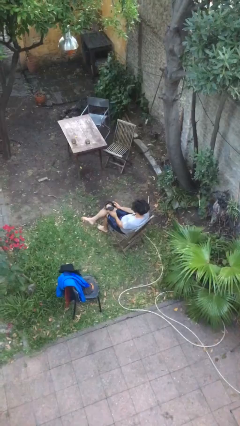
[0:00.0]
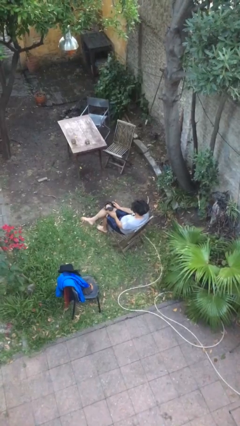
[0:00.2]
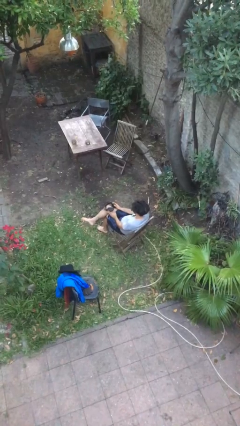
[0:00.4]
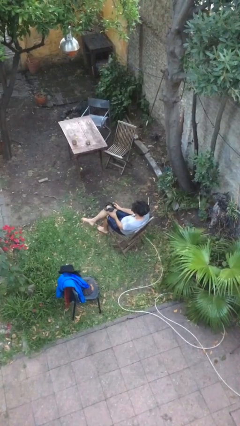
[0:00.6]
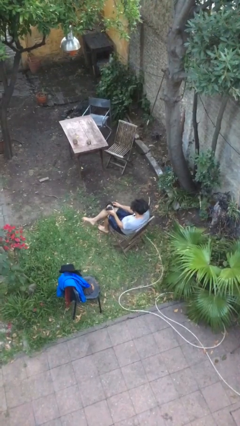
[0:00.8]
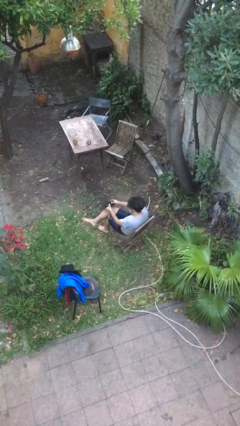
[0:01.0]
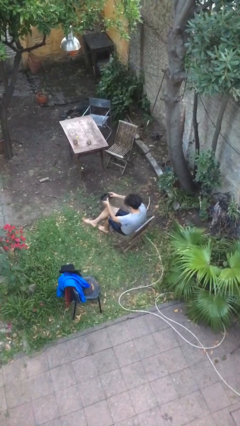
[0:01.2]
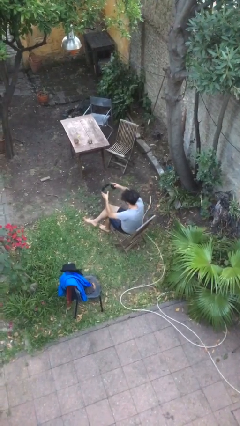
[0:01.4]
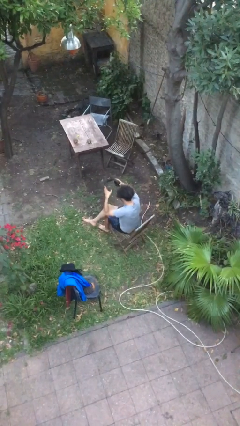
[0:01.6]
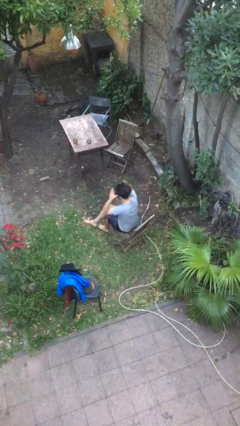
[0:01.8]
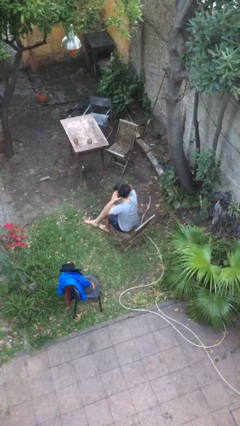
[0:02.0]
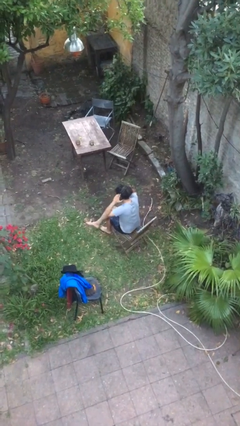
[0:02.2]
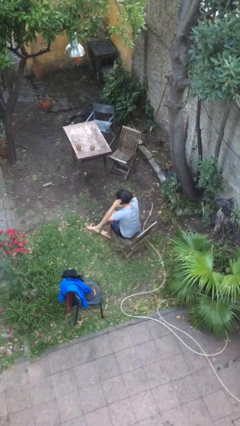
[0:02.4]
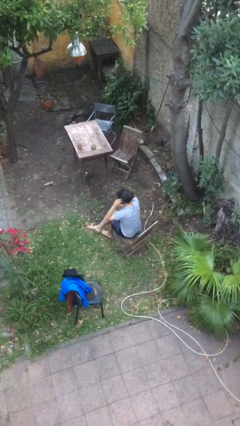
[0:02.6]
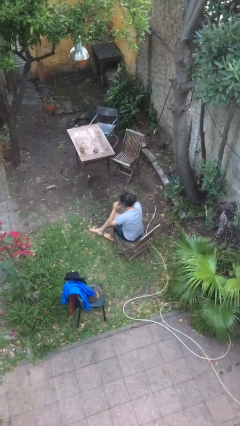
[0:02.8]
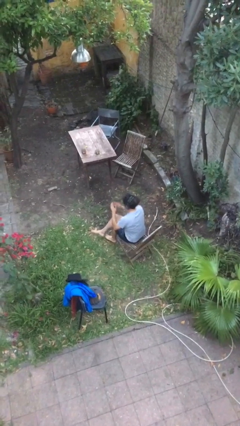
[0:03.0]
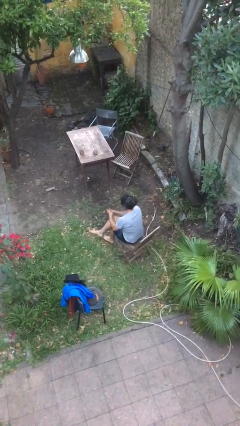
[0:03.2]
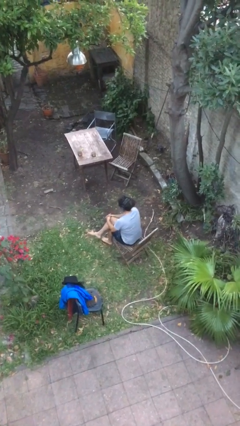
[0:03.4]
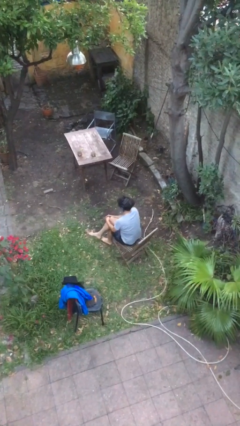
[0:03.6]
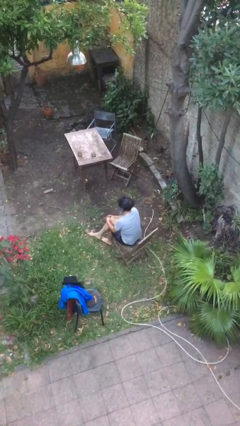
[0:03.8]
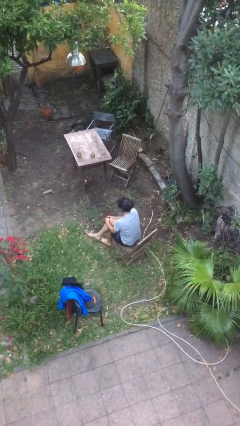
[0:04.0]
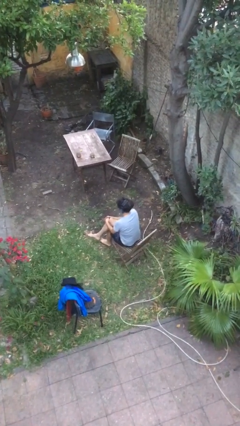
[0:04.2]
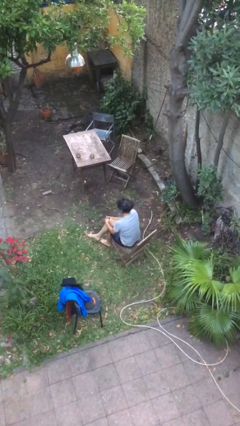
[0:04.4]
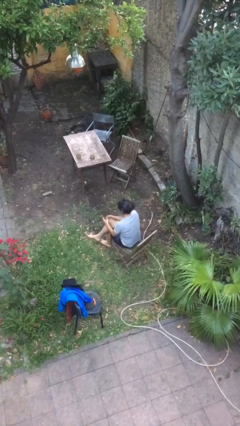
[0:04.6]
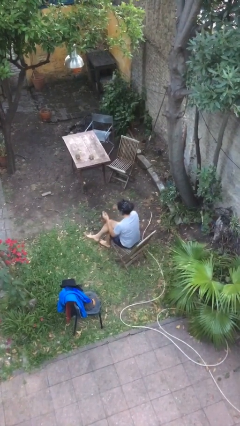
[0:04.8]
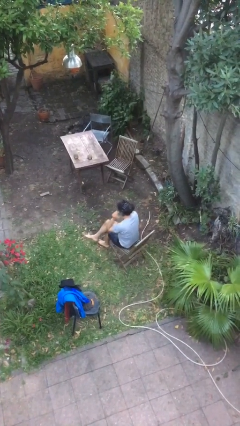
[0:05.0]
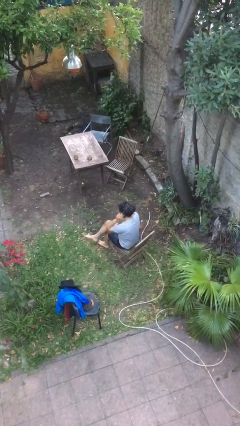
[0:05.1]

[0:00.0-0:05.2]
person puts on headphones

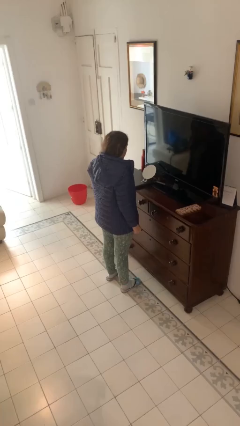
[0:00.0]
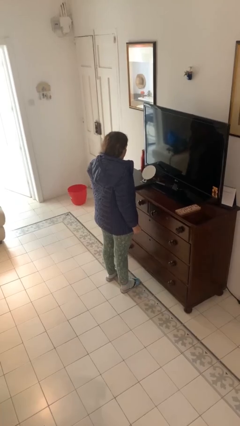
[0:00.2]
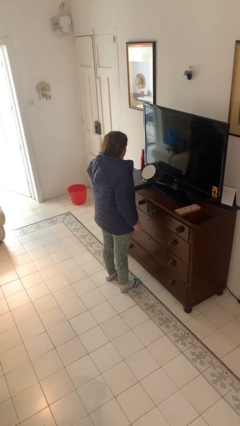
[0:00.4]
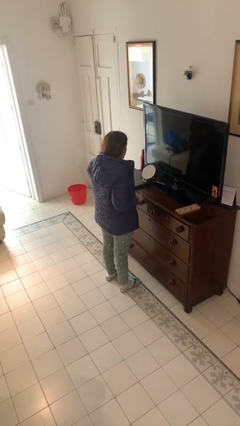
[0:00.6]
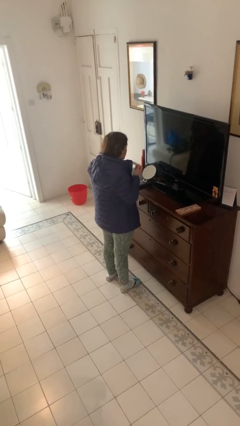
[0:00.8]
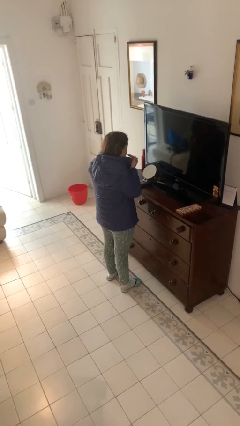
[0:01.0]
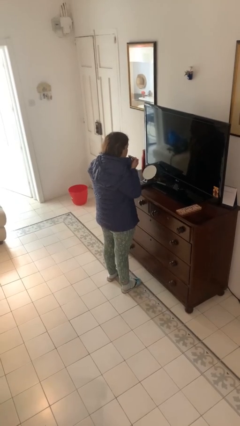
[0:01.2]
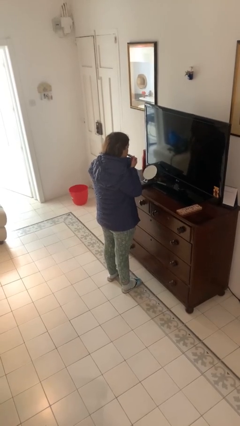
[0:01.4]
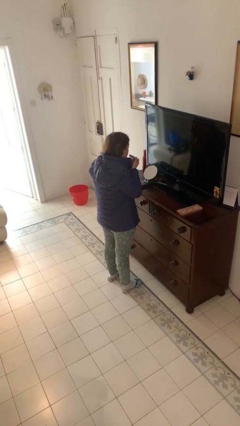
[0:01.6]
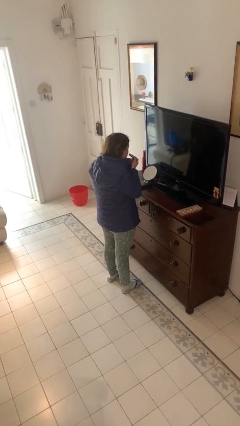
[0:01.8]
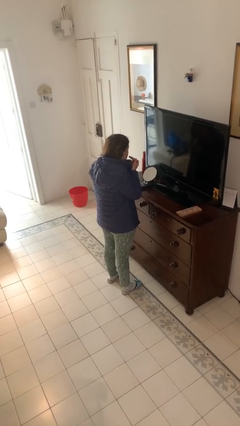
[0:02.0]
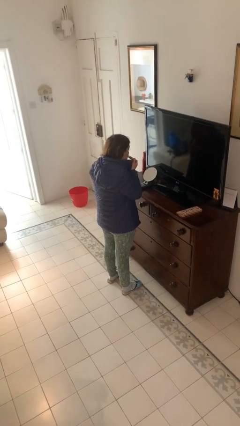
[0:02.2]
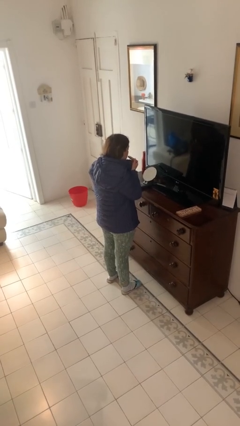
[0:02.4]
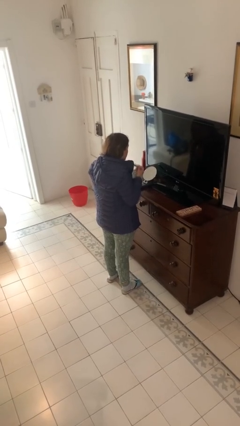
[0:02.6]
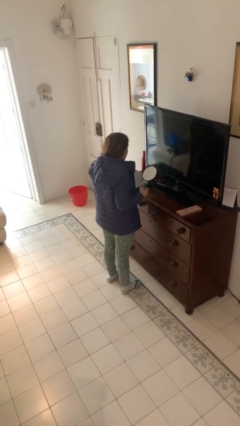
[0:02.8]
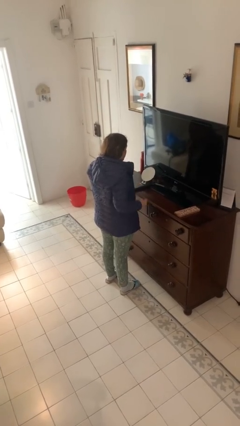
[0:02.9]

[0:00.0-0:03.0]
person applies lip makeup

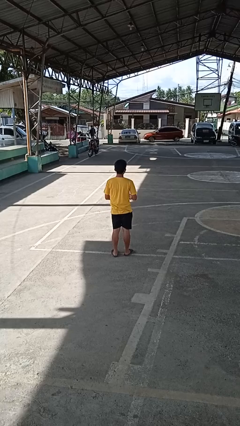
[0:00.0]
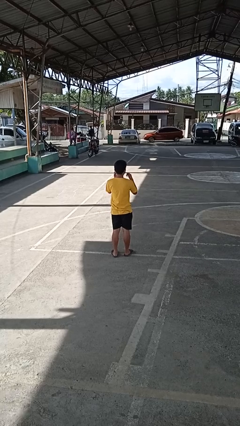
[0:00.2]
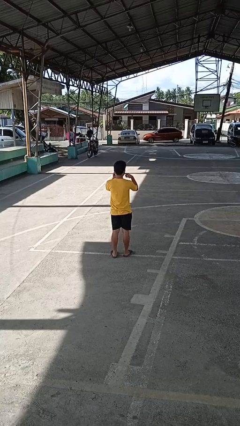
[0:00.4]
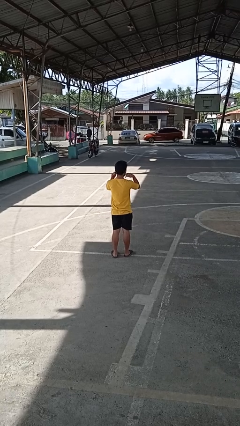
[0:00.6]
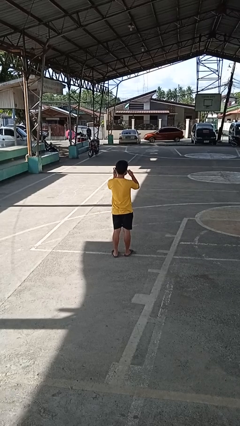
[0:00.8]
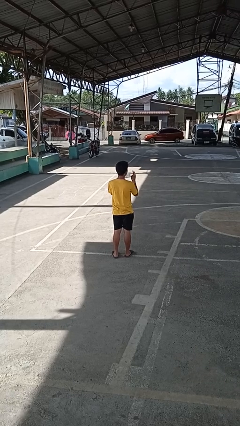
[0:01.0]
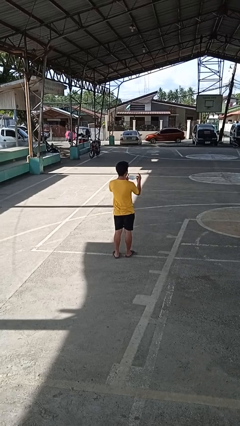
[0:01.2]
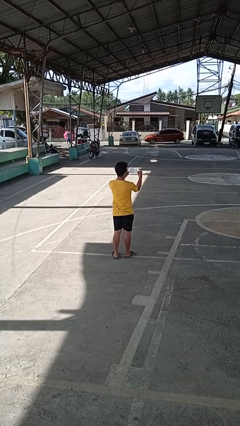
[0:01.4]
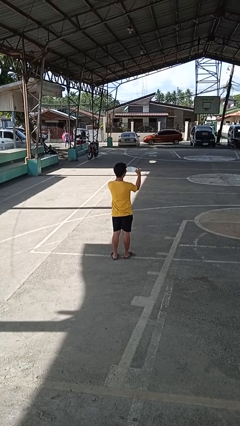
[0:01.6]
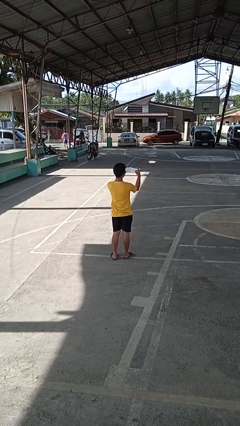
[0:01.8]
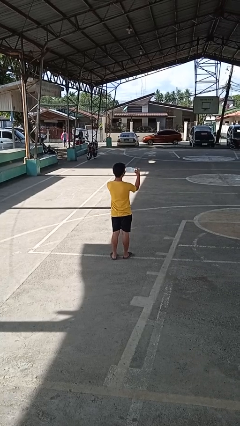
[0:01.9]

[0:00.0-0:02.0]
person takes off facemask

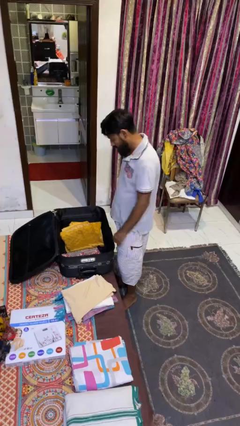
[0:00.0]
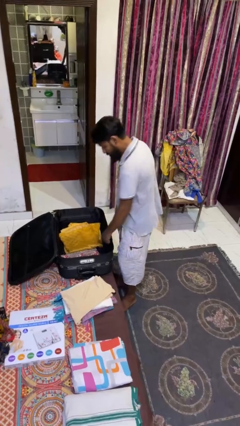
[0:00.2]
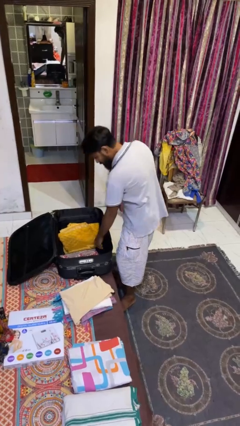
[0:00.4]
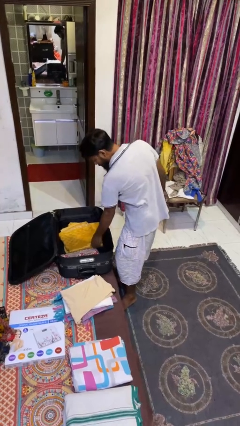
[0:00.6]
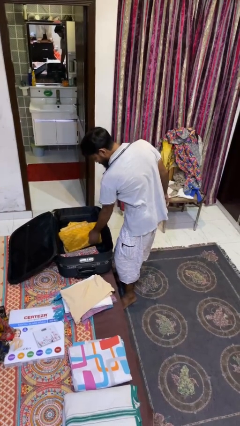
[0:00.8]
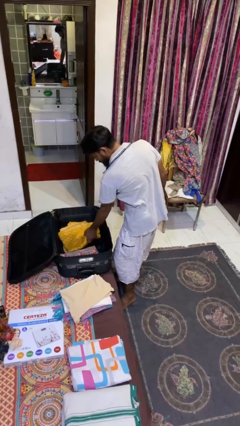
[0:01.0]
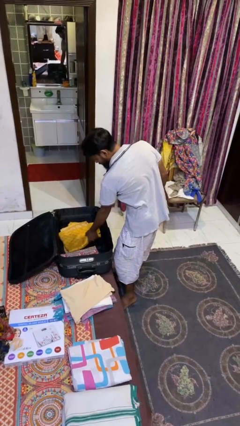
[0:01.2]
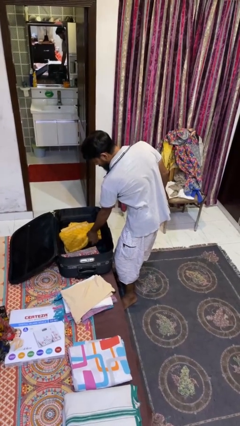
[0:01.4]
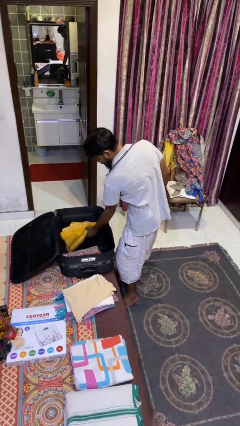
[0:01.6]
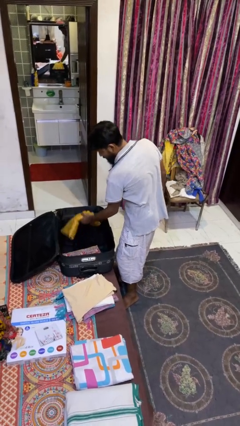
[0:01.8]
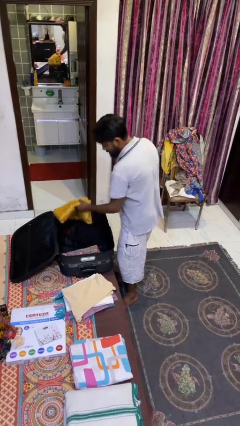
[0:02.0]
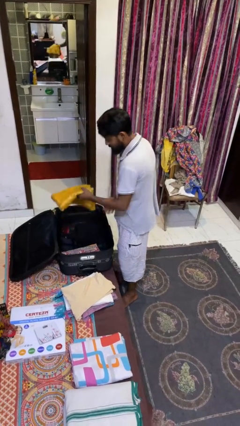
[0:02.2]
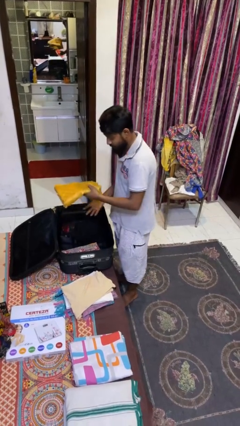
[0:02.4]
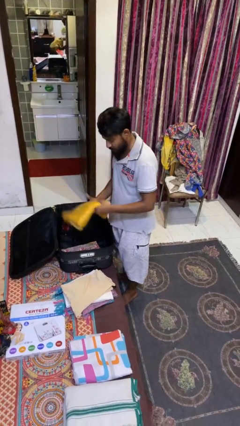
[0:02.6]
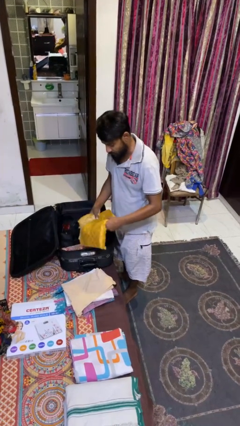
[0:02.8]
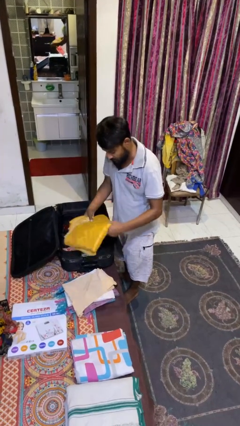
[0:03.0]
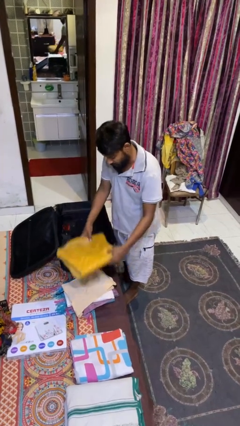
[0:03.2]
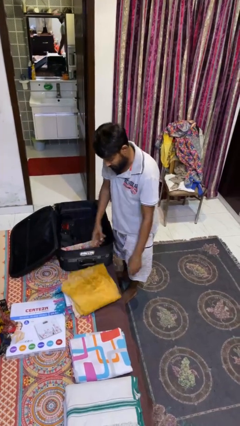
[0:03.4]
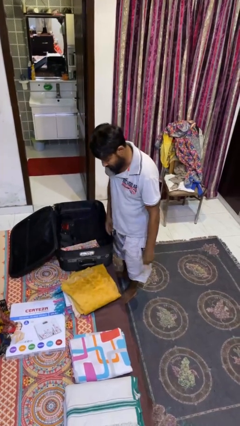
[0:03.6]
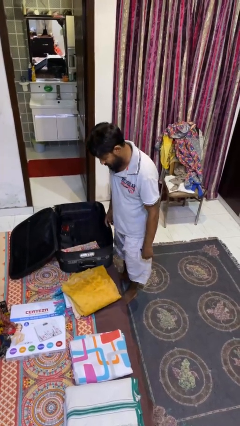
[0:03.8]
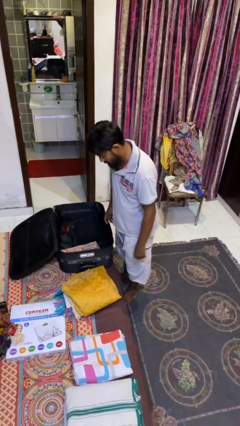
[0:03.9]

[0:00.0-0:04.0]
person unloads clothes from suitcase

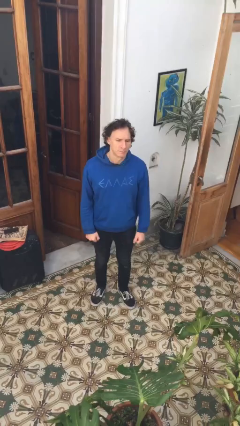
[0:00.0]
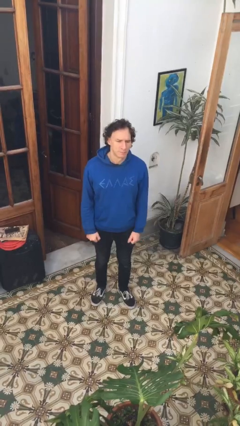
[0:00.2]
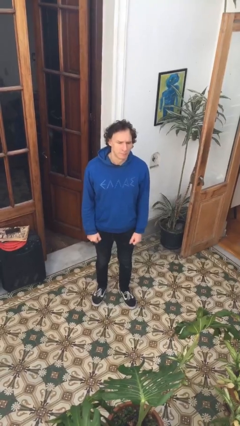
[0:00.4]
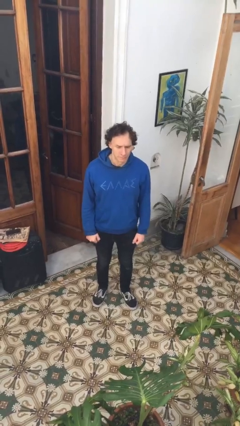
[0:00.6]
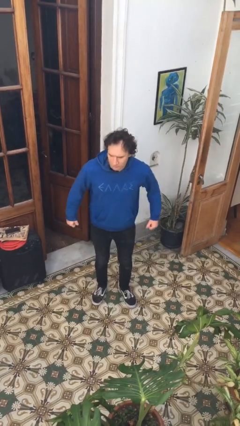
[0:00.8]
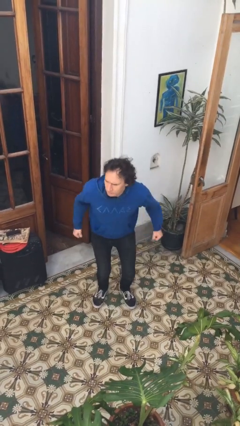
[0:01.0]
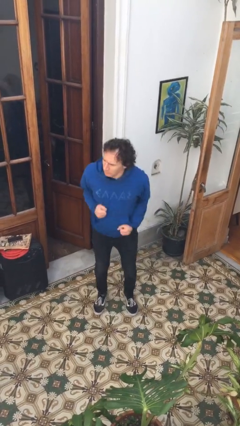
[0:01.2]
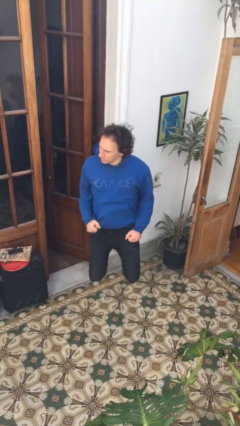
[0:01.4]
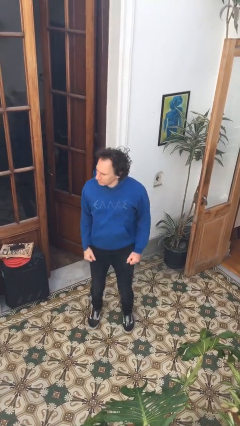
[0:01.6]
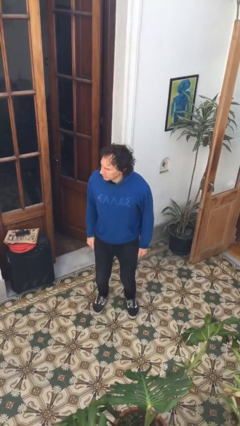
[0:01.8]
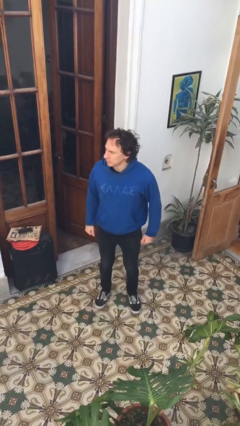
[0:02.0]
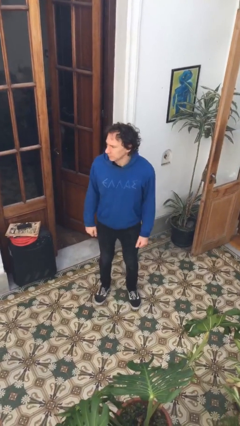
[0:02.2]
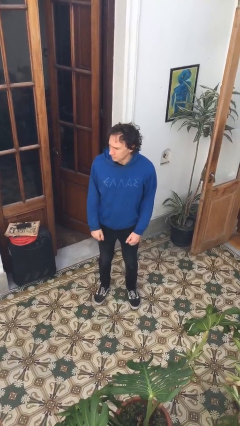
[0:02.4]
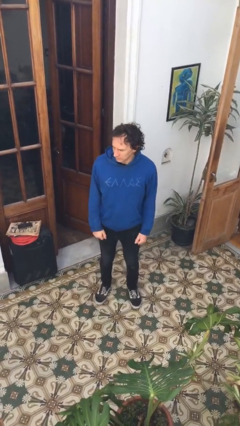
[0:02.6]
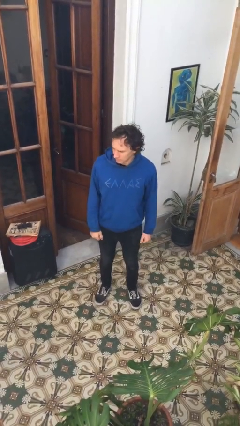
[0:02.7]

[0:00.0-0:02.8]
person jumps

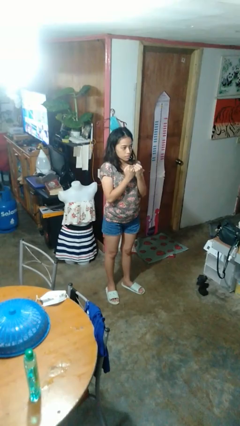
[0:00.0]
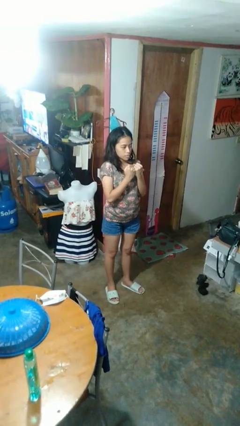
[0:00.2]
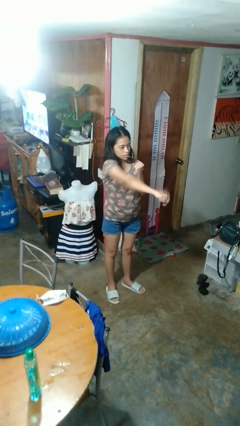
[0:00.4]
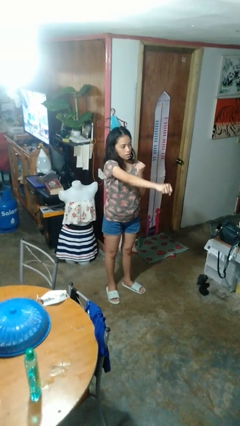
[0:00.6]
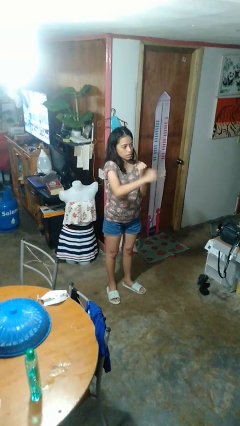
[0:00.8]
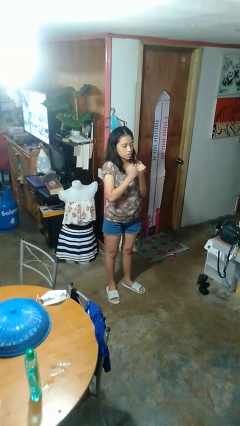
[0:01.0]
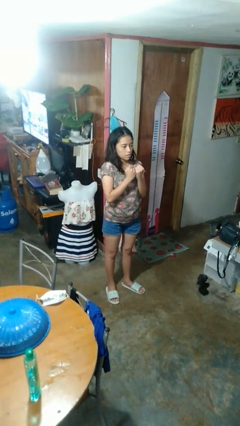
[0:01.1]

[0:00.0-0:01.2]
person punches
